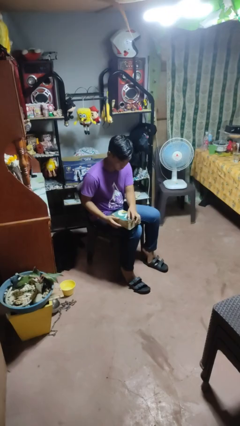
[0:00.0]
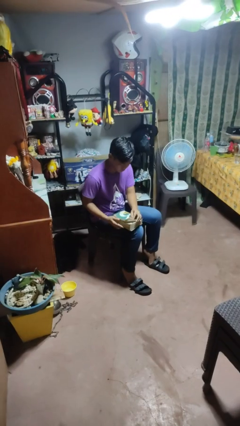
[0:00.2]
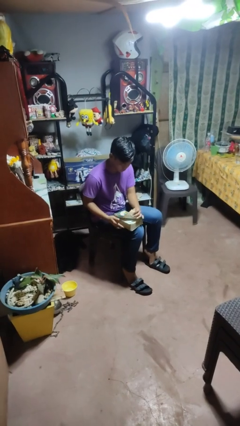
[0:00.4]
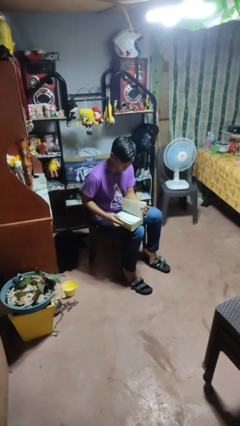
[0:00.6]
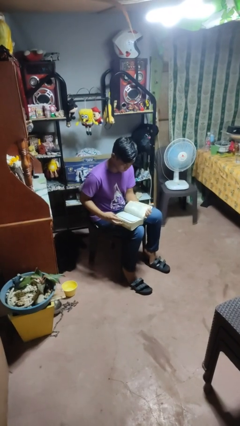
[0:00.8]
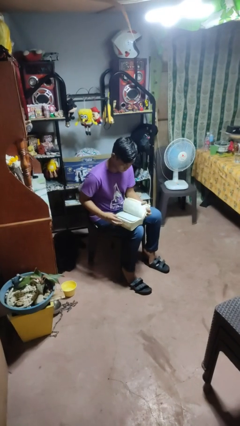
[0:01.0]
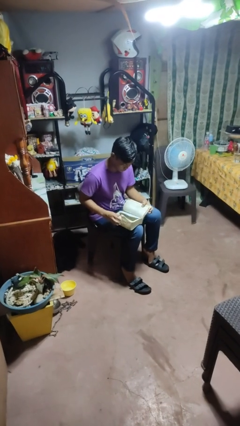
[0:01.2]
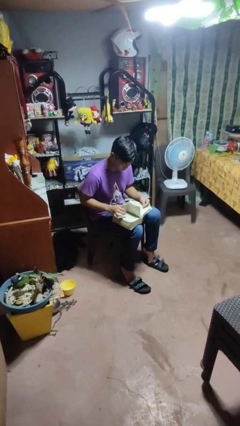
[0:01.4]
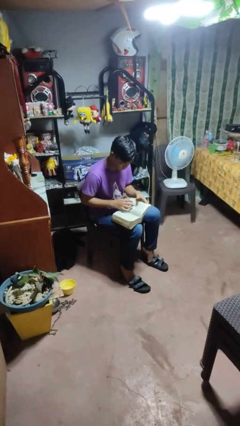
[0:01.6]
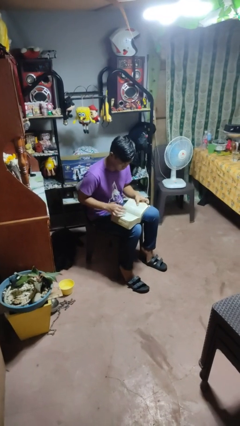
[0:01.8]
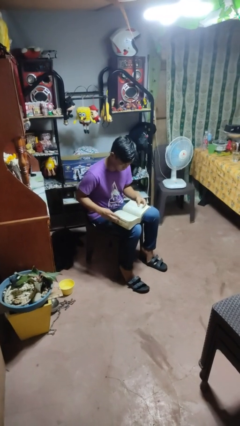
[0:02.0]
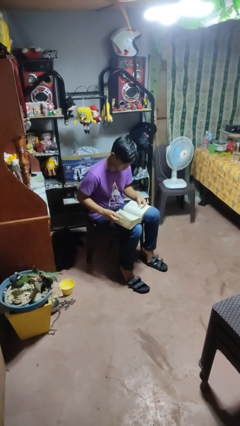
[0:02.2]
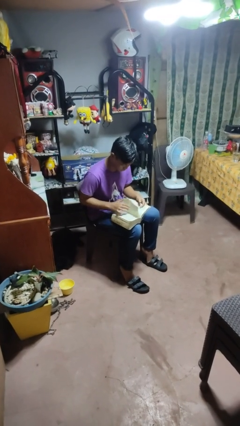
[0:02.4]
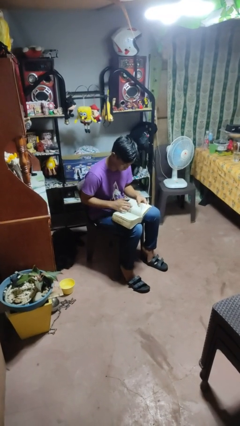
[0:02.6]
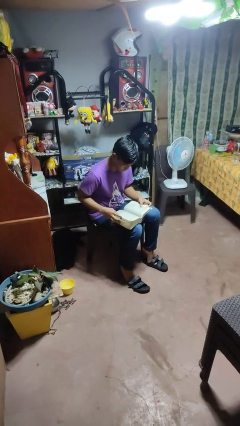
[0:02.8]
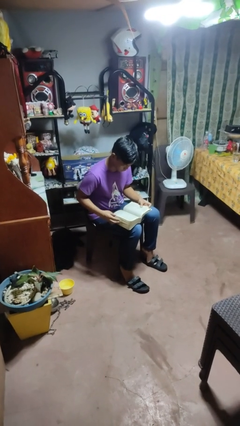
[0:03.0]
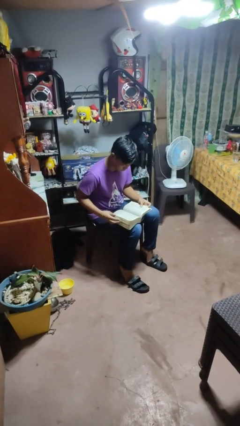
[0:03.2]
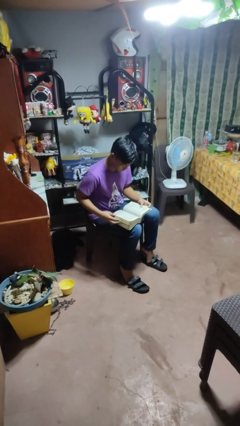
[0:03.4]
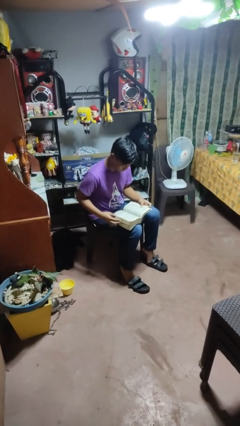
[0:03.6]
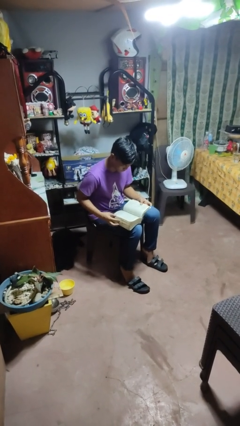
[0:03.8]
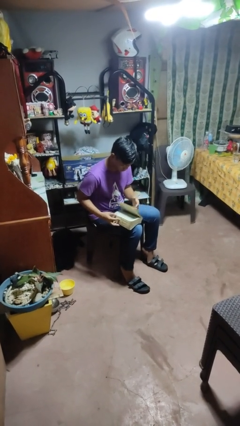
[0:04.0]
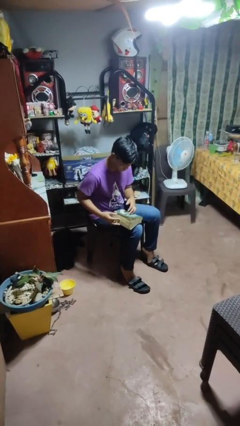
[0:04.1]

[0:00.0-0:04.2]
person reads book

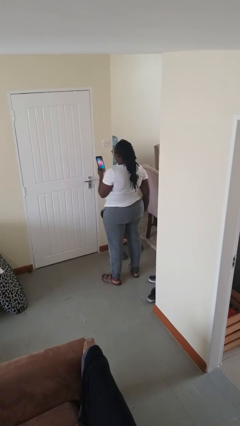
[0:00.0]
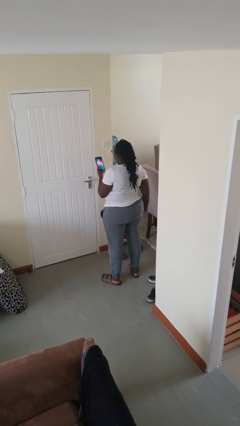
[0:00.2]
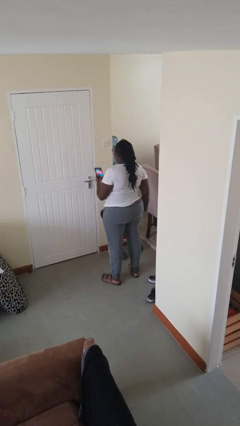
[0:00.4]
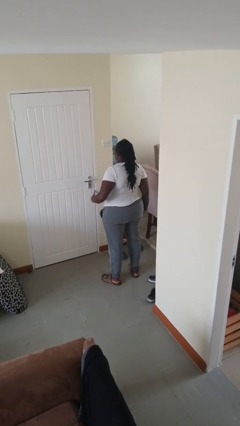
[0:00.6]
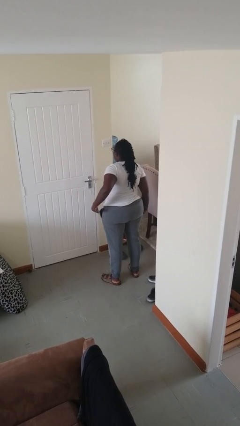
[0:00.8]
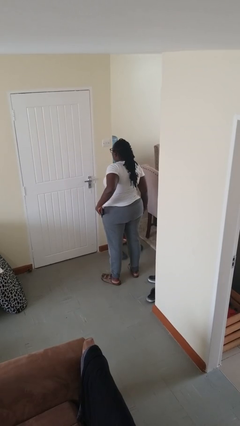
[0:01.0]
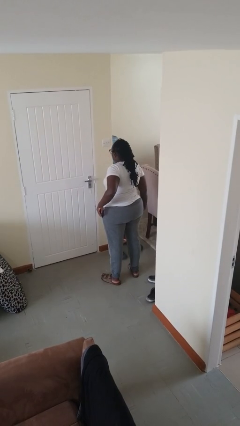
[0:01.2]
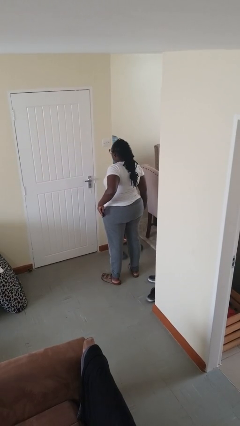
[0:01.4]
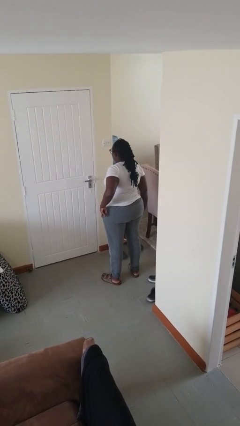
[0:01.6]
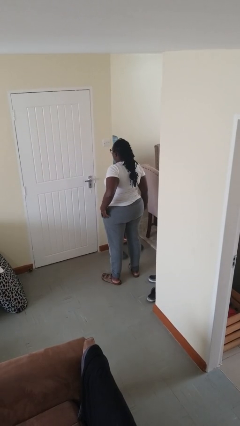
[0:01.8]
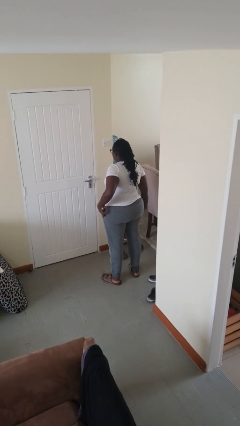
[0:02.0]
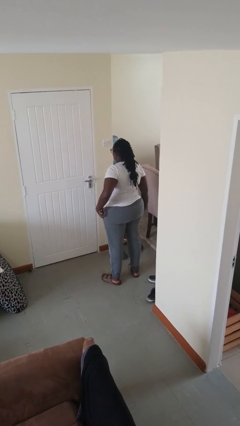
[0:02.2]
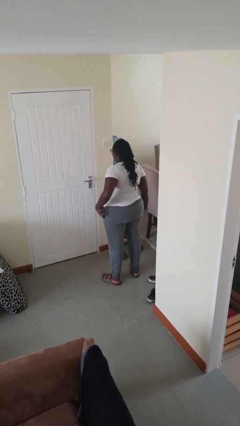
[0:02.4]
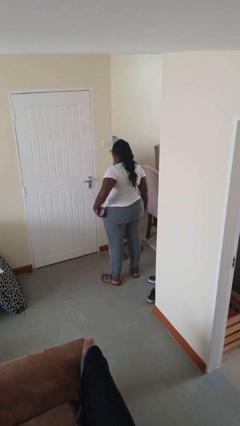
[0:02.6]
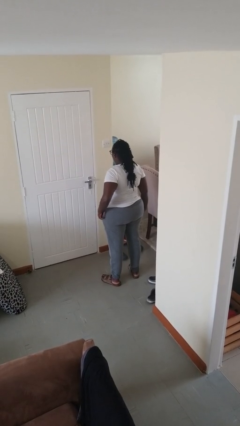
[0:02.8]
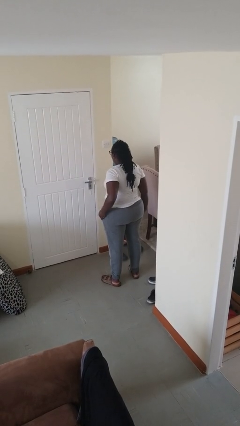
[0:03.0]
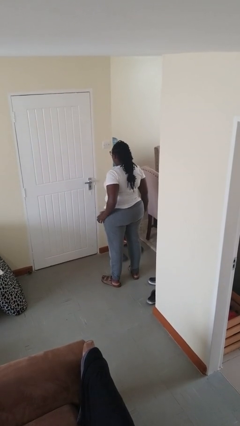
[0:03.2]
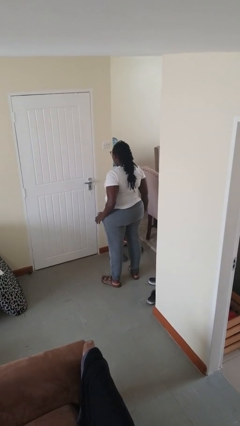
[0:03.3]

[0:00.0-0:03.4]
person puts phone into pocket

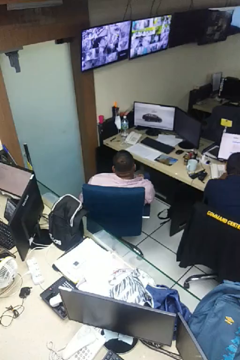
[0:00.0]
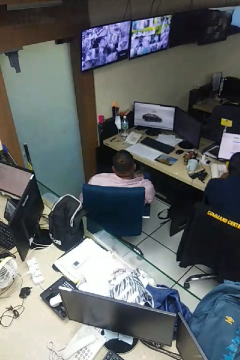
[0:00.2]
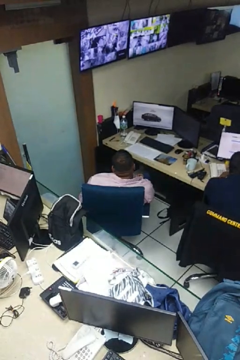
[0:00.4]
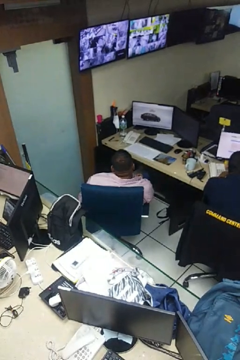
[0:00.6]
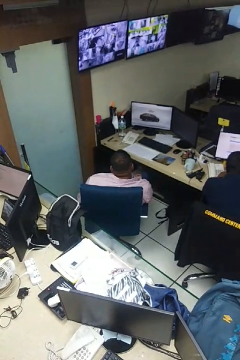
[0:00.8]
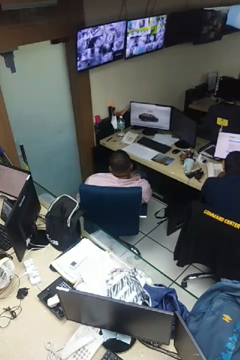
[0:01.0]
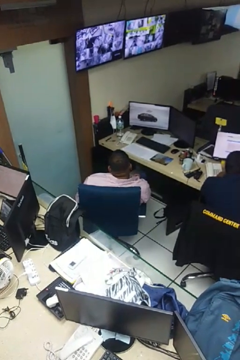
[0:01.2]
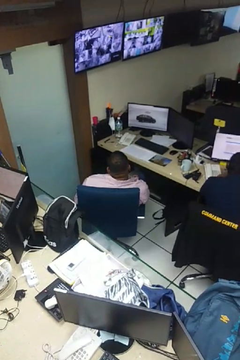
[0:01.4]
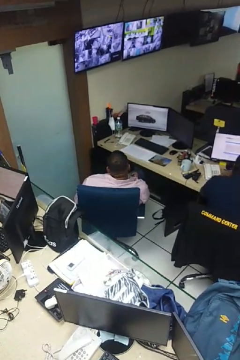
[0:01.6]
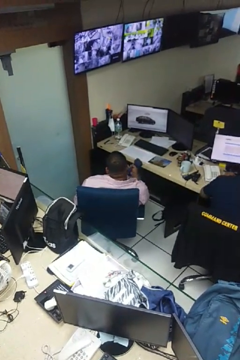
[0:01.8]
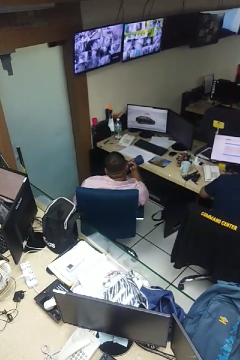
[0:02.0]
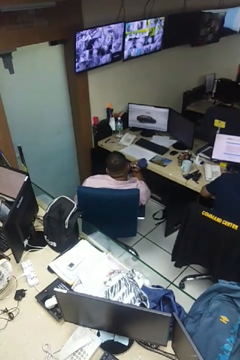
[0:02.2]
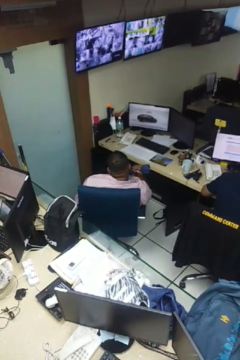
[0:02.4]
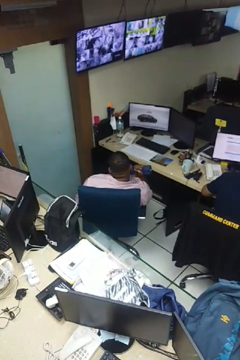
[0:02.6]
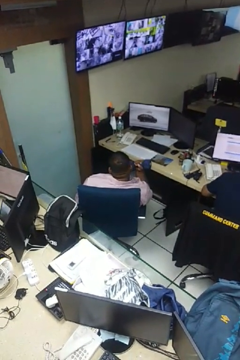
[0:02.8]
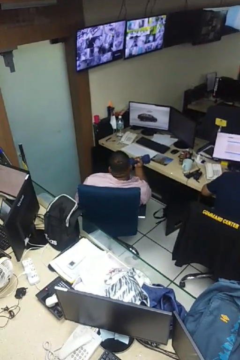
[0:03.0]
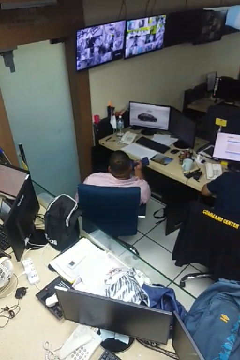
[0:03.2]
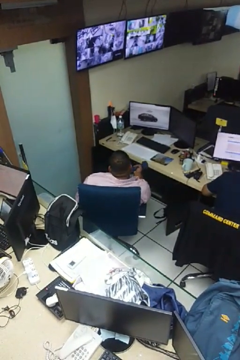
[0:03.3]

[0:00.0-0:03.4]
person lifts dumbbells

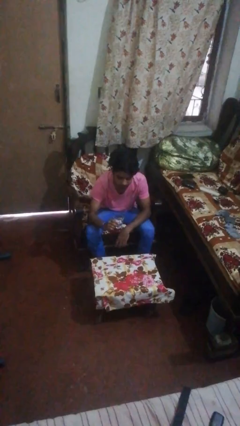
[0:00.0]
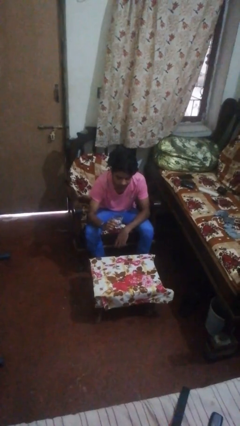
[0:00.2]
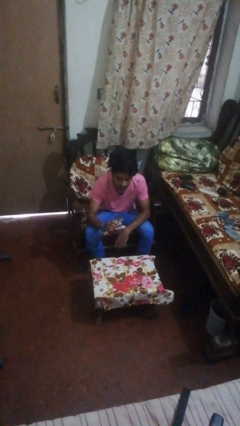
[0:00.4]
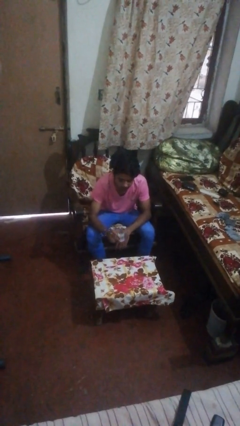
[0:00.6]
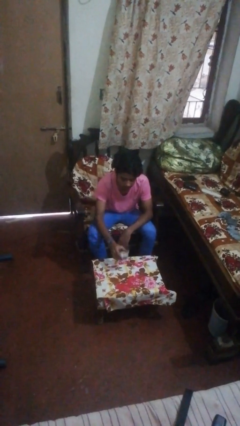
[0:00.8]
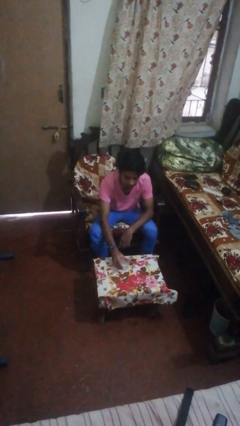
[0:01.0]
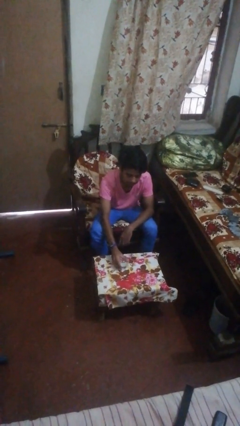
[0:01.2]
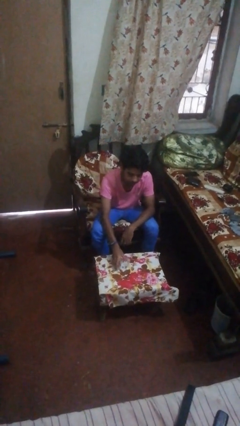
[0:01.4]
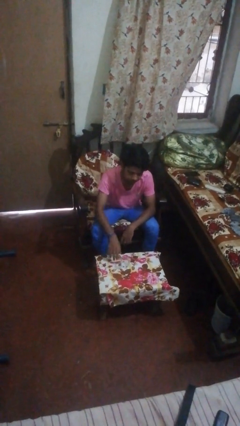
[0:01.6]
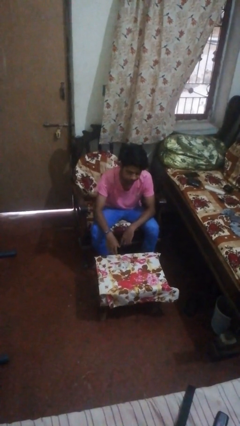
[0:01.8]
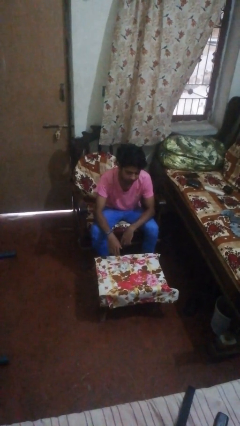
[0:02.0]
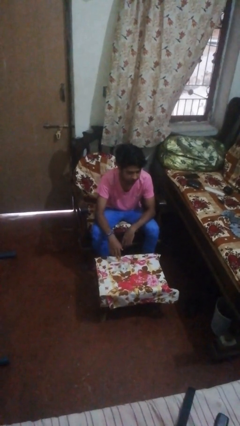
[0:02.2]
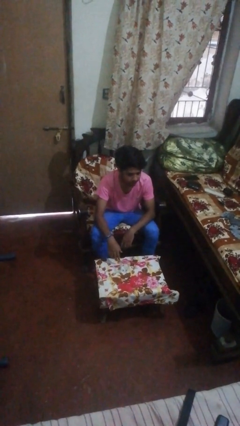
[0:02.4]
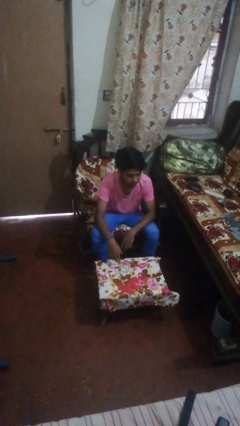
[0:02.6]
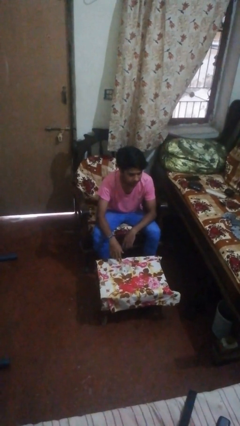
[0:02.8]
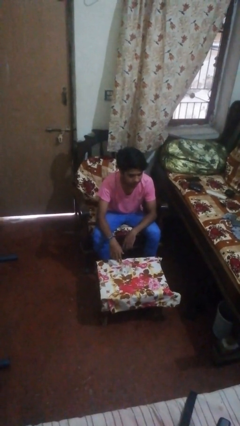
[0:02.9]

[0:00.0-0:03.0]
person puts down object on table

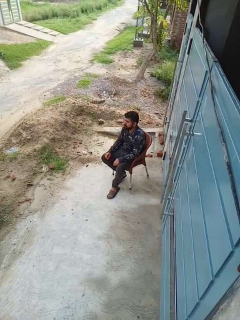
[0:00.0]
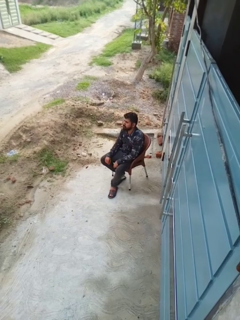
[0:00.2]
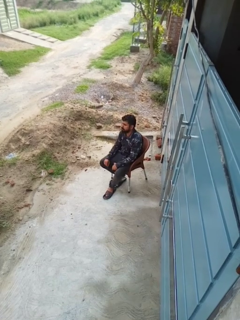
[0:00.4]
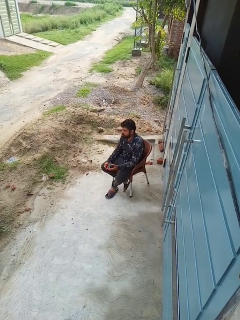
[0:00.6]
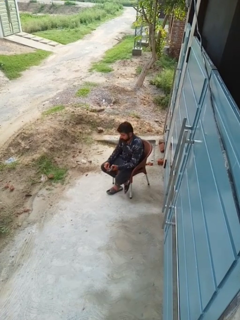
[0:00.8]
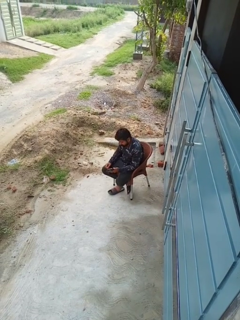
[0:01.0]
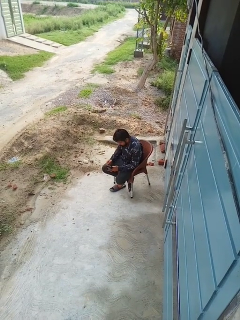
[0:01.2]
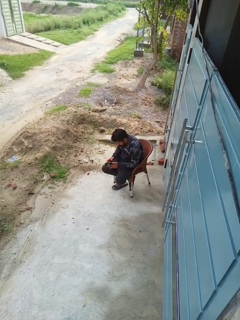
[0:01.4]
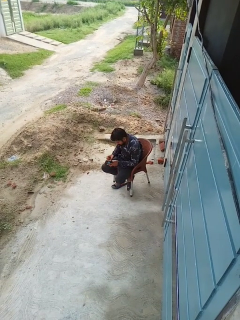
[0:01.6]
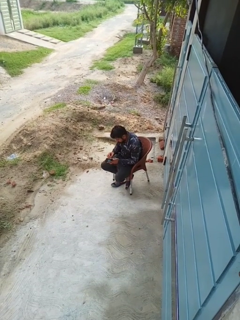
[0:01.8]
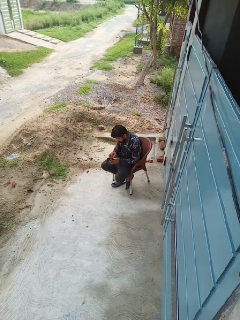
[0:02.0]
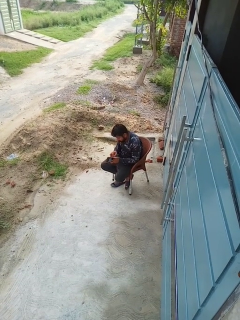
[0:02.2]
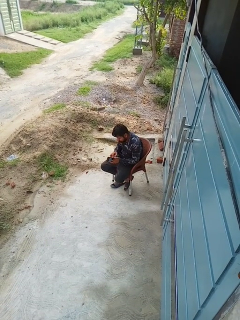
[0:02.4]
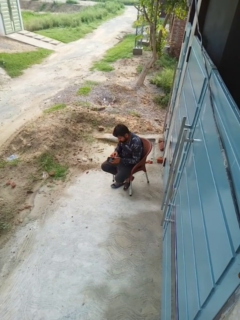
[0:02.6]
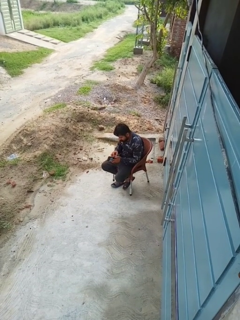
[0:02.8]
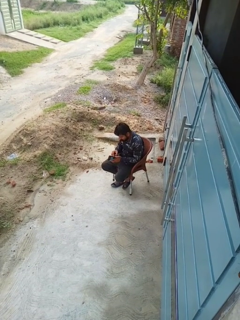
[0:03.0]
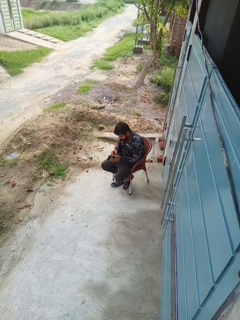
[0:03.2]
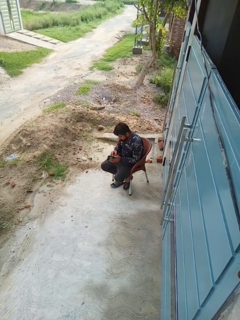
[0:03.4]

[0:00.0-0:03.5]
person searches in purse

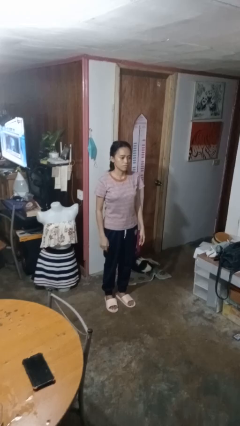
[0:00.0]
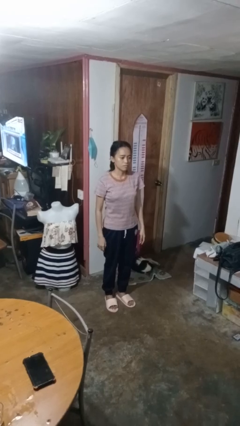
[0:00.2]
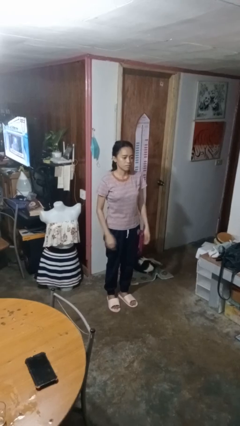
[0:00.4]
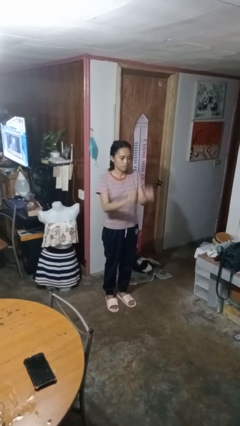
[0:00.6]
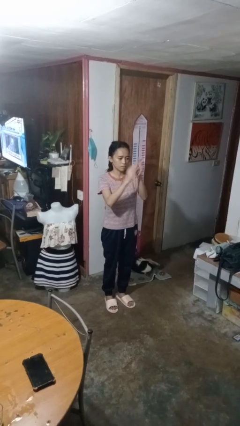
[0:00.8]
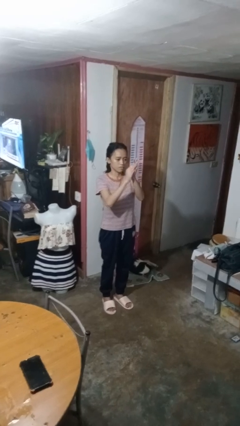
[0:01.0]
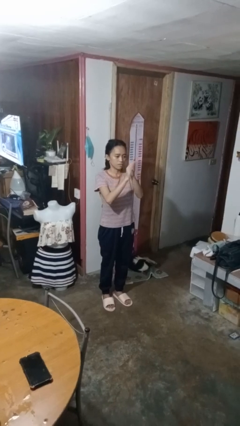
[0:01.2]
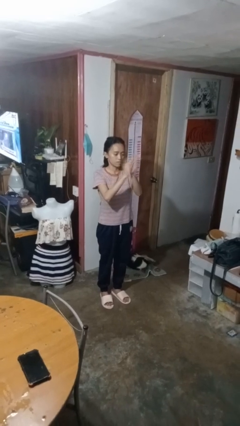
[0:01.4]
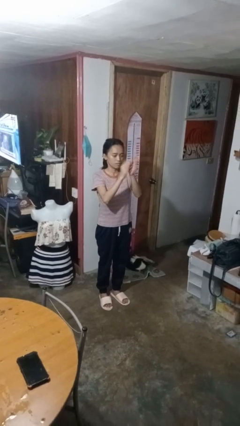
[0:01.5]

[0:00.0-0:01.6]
person claps hands
